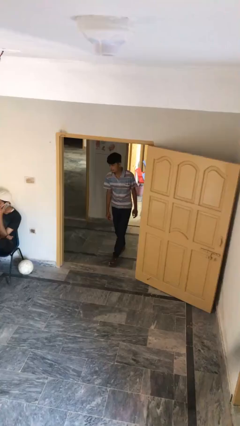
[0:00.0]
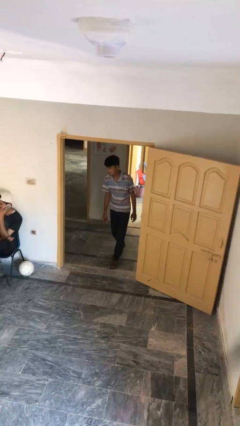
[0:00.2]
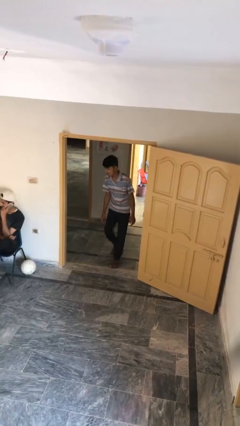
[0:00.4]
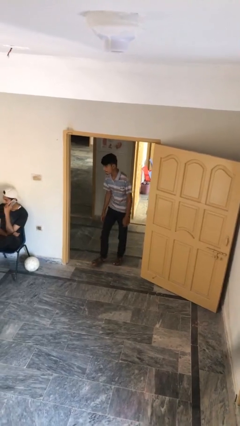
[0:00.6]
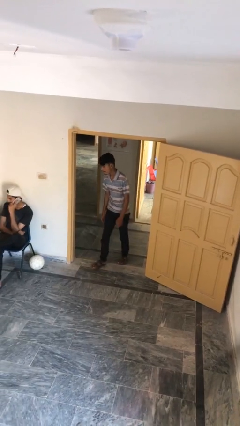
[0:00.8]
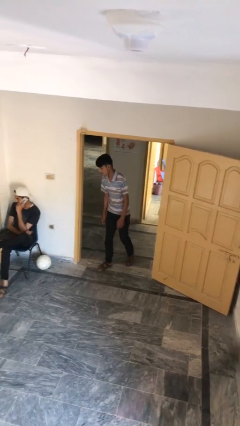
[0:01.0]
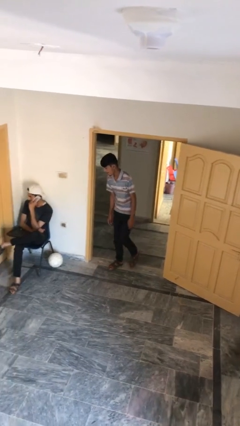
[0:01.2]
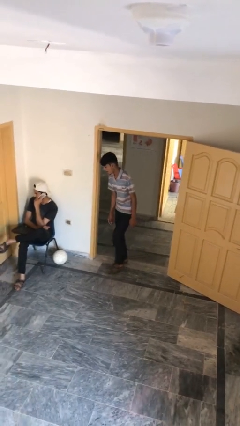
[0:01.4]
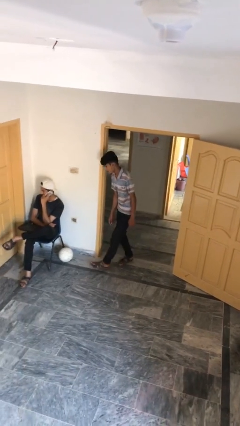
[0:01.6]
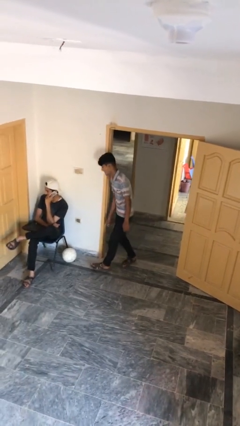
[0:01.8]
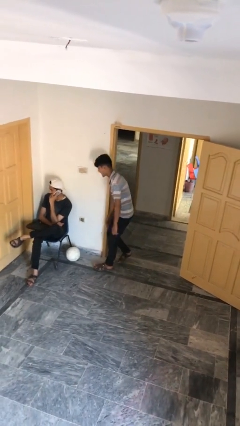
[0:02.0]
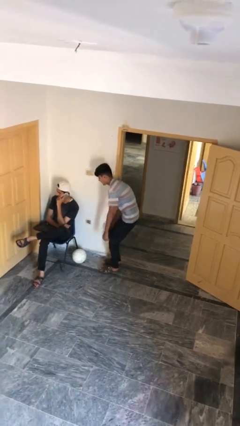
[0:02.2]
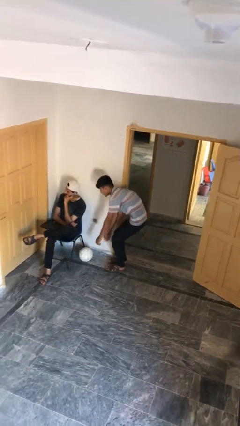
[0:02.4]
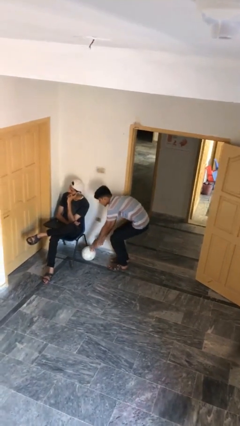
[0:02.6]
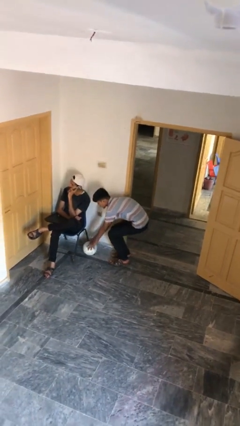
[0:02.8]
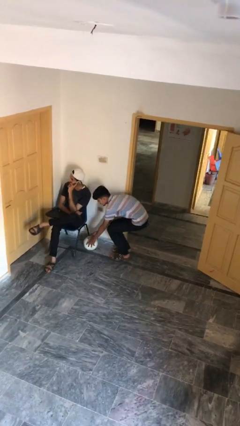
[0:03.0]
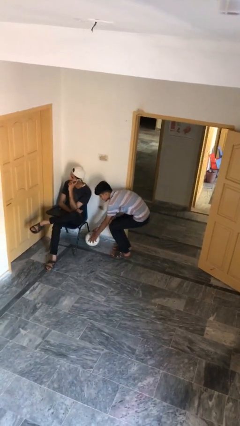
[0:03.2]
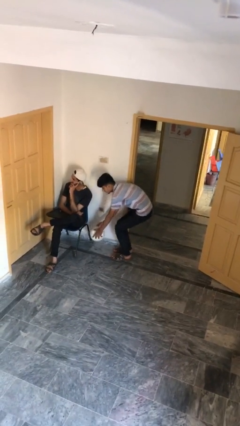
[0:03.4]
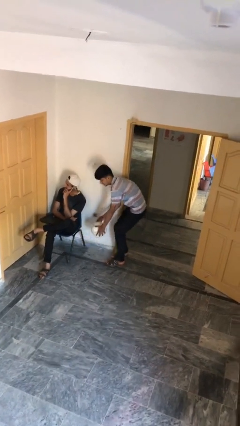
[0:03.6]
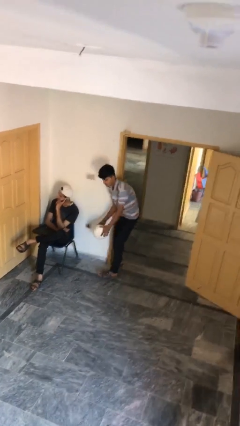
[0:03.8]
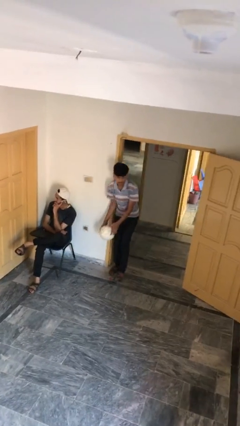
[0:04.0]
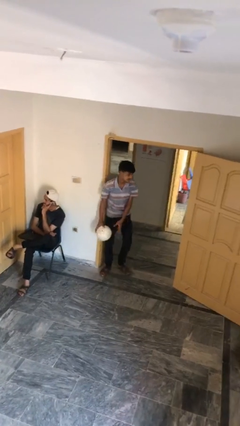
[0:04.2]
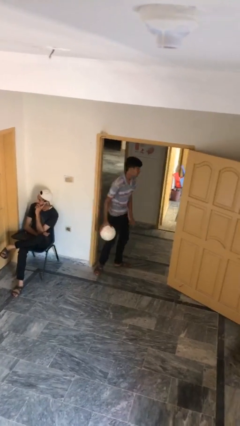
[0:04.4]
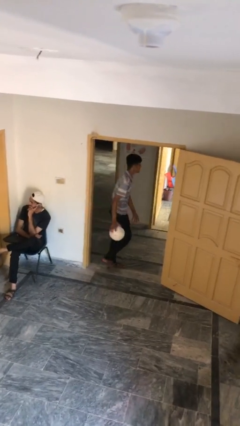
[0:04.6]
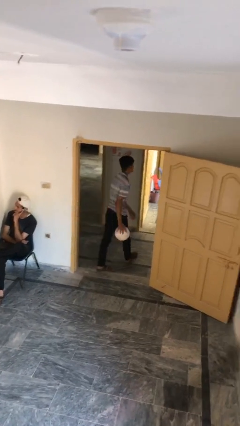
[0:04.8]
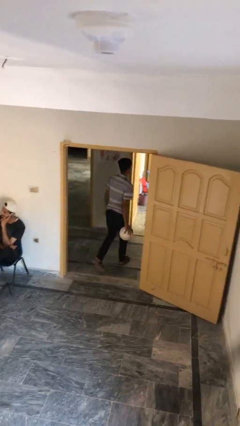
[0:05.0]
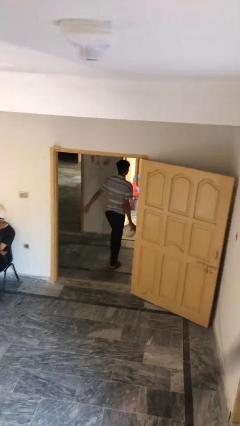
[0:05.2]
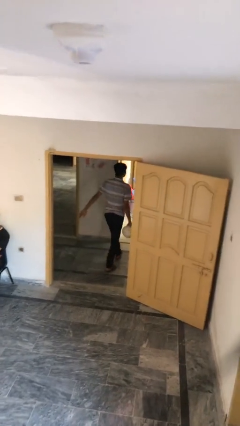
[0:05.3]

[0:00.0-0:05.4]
person steals object from person

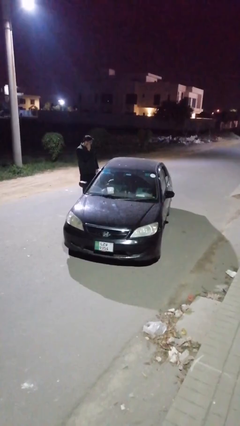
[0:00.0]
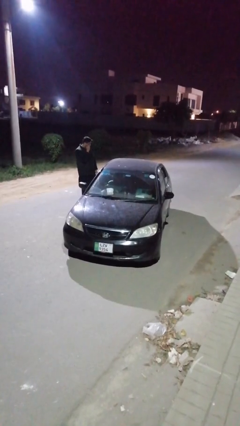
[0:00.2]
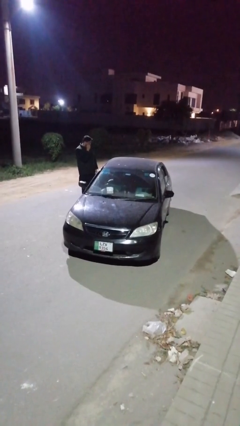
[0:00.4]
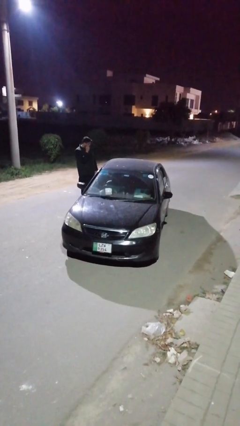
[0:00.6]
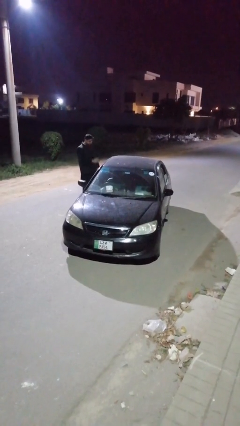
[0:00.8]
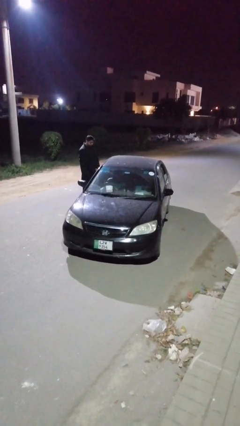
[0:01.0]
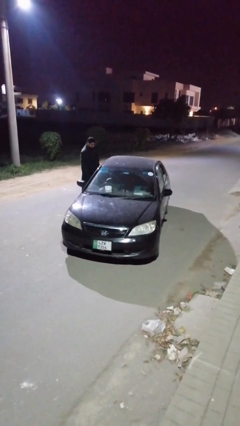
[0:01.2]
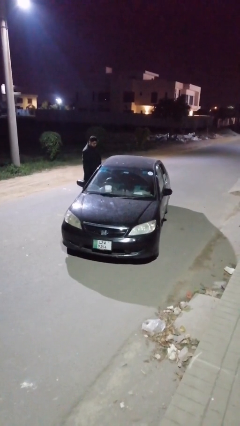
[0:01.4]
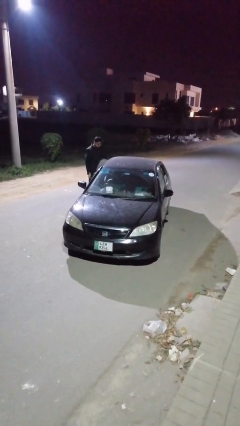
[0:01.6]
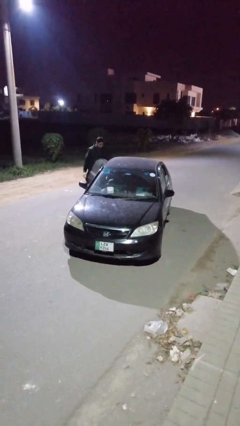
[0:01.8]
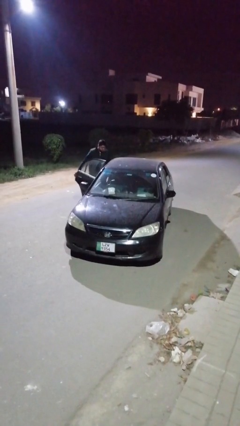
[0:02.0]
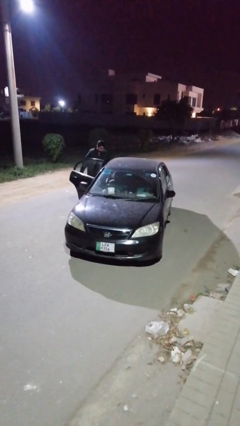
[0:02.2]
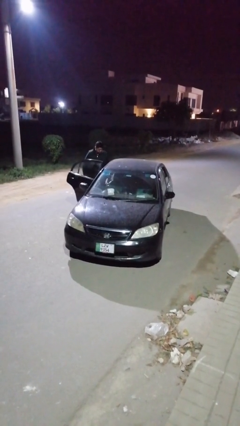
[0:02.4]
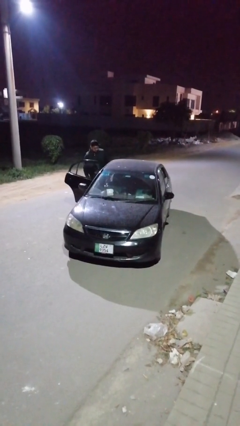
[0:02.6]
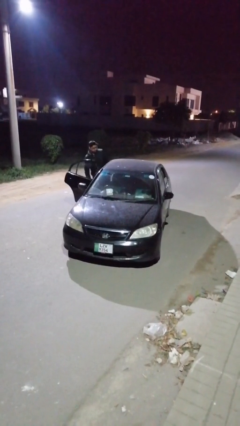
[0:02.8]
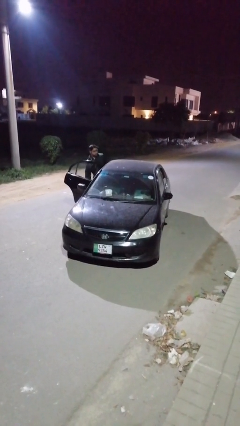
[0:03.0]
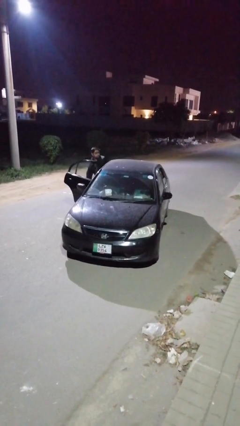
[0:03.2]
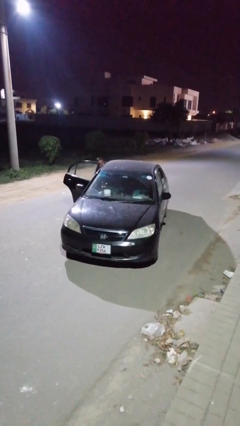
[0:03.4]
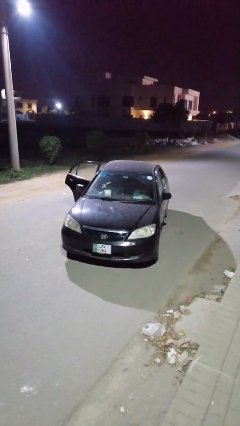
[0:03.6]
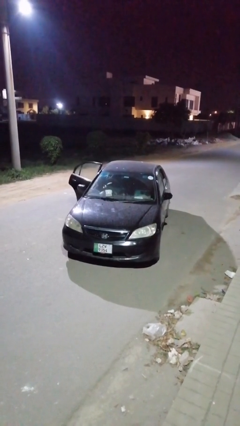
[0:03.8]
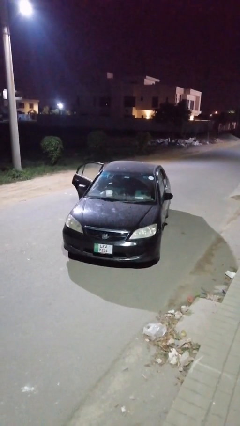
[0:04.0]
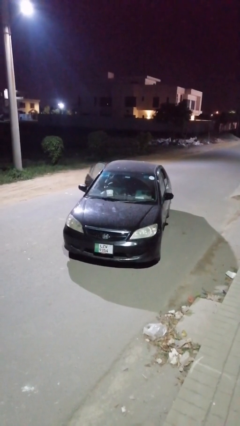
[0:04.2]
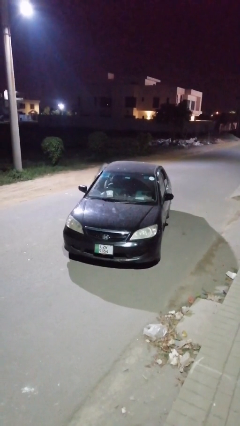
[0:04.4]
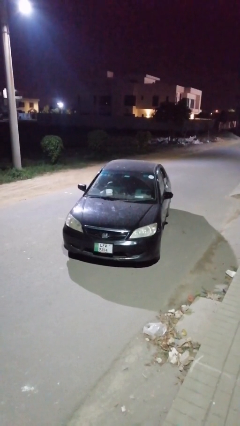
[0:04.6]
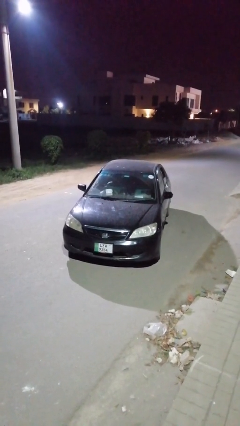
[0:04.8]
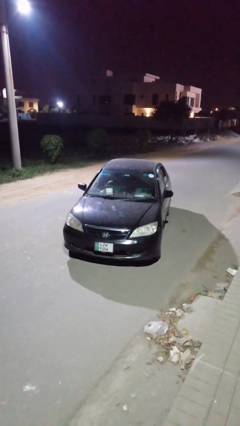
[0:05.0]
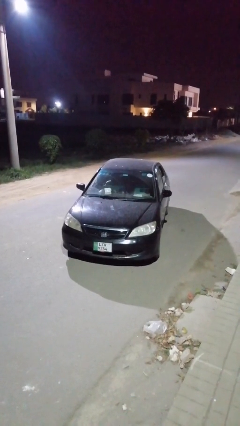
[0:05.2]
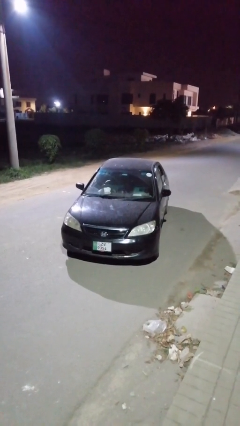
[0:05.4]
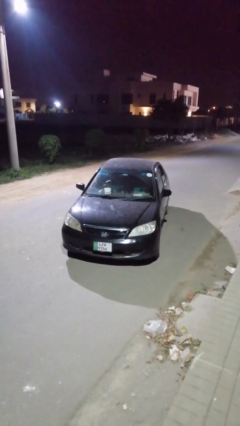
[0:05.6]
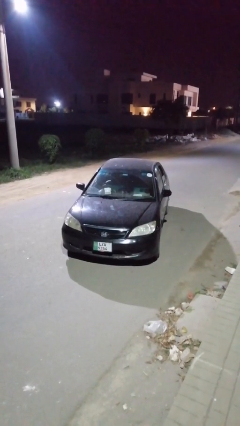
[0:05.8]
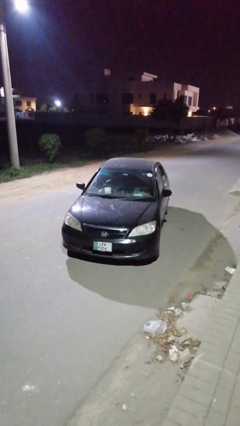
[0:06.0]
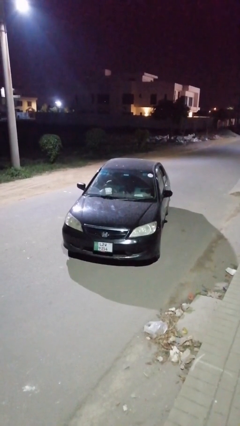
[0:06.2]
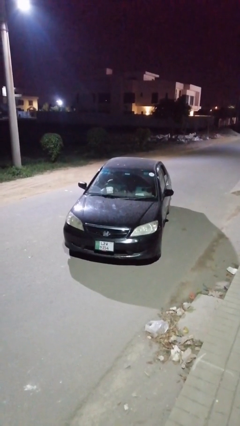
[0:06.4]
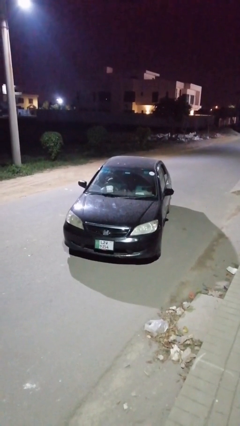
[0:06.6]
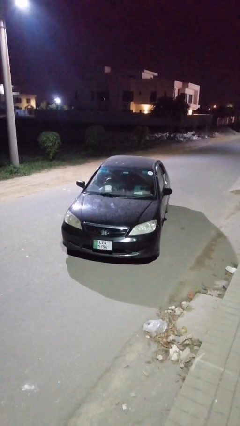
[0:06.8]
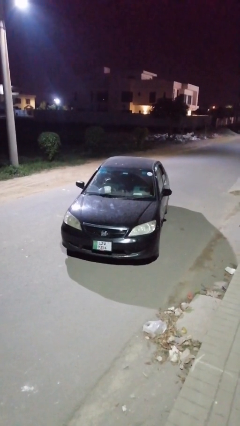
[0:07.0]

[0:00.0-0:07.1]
car picks up person

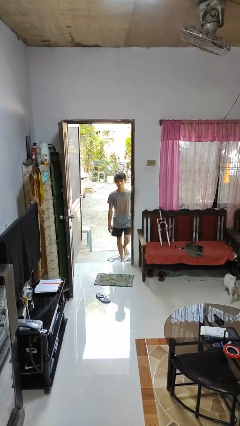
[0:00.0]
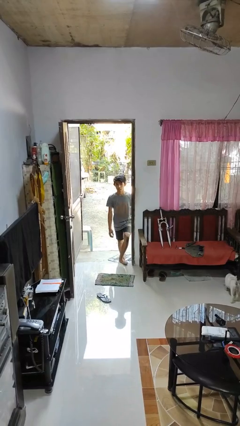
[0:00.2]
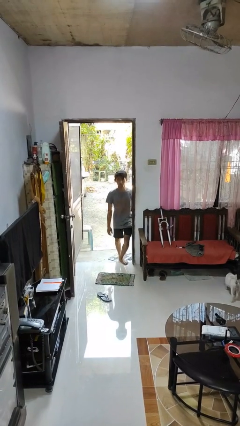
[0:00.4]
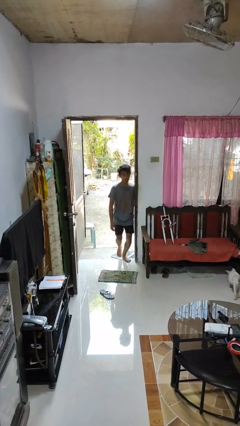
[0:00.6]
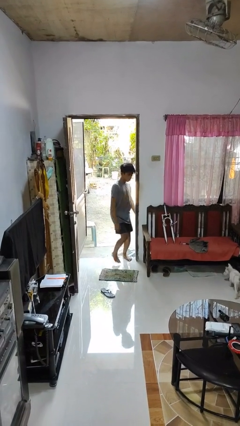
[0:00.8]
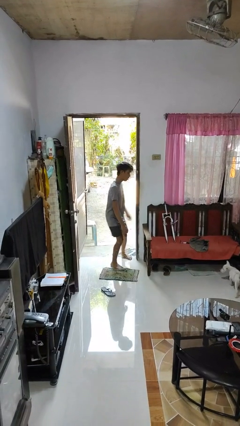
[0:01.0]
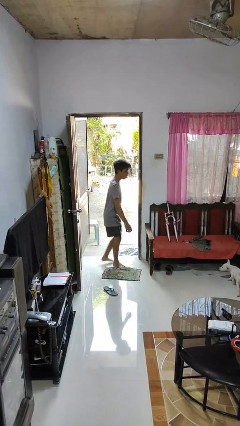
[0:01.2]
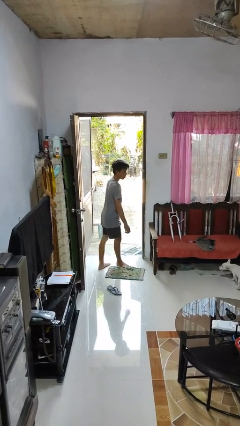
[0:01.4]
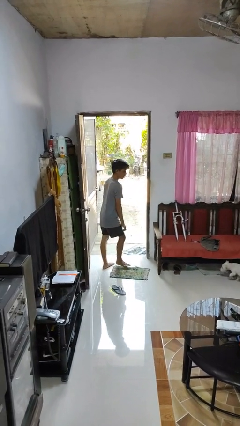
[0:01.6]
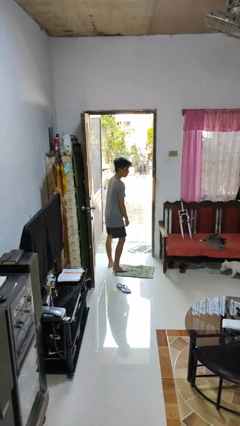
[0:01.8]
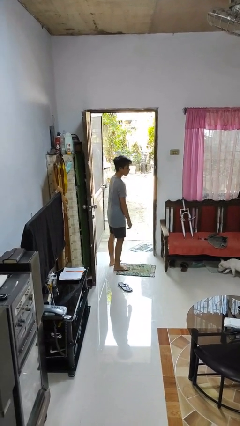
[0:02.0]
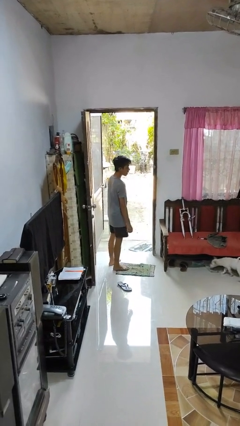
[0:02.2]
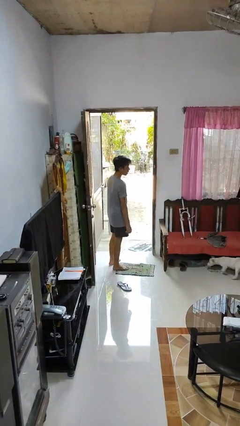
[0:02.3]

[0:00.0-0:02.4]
person bumps into wall

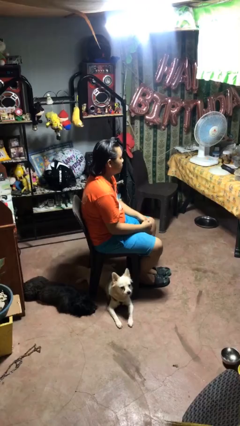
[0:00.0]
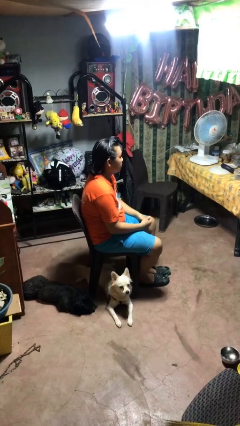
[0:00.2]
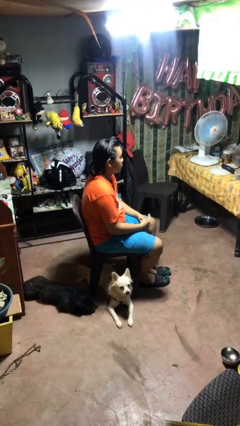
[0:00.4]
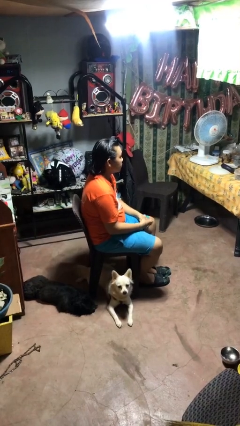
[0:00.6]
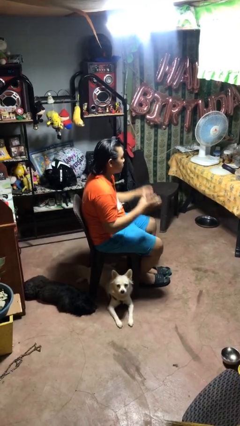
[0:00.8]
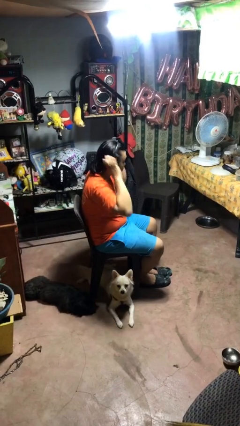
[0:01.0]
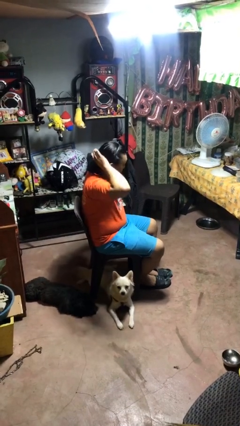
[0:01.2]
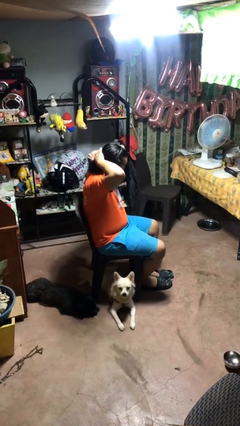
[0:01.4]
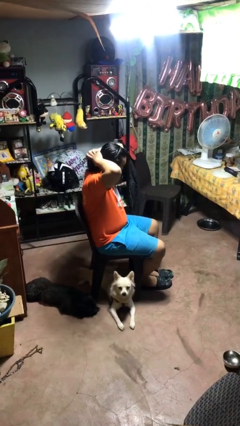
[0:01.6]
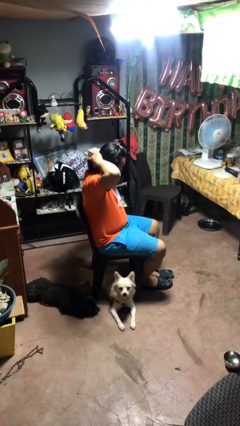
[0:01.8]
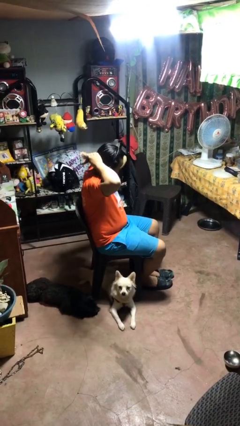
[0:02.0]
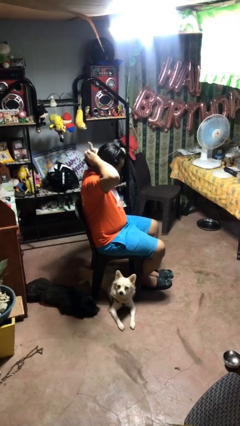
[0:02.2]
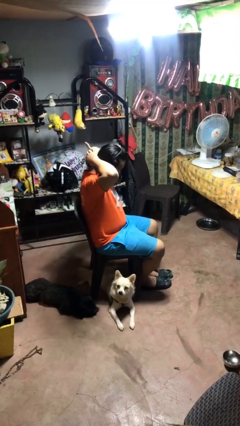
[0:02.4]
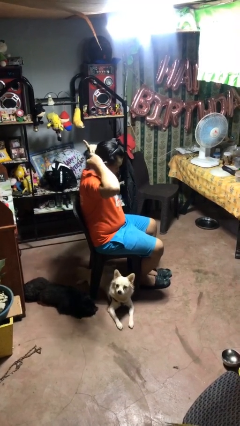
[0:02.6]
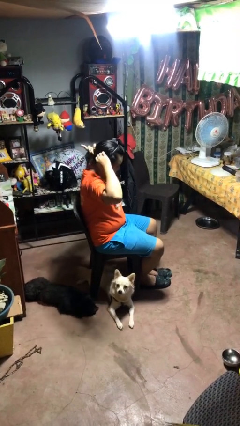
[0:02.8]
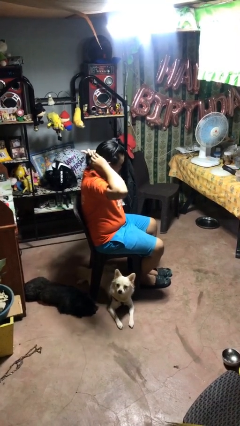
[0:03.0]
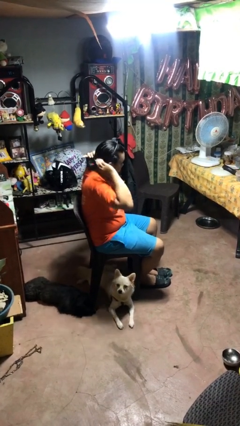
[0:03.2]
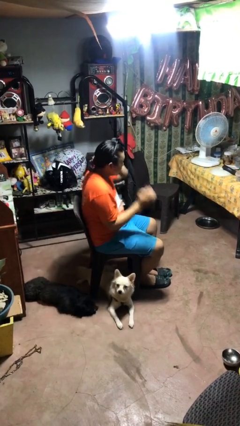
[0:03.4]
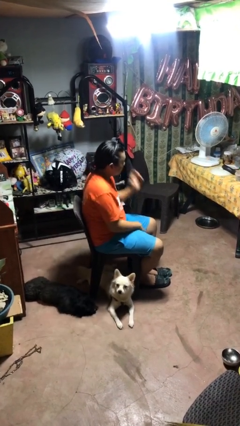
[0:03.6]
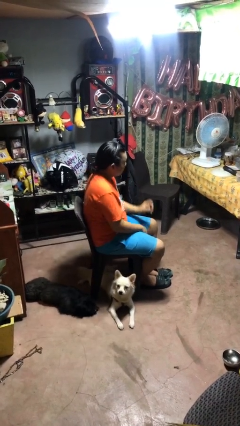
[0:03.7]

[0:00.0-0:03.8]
person puts hair in ponytail
